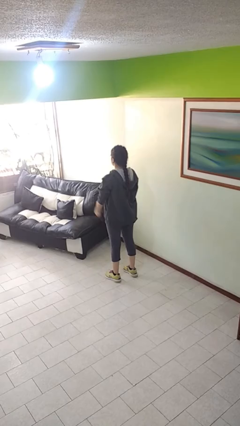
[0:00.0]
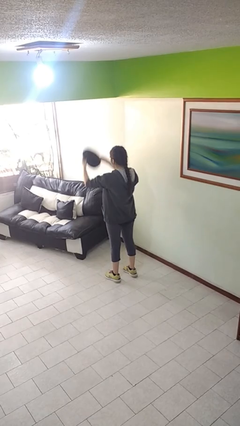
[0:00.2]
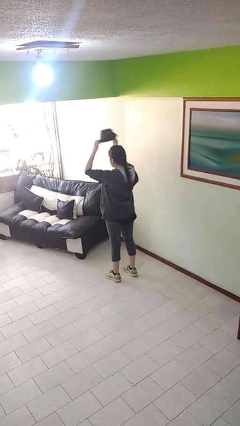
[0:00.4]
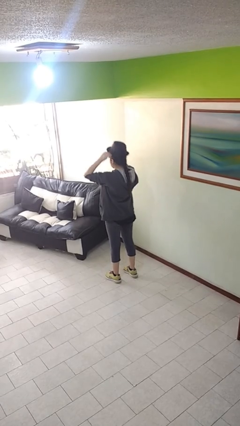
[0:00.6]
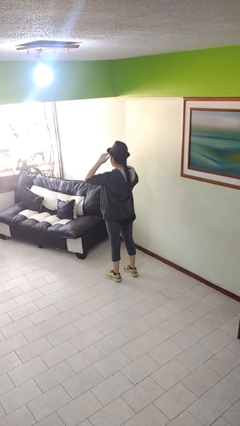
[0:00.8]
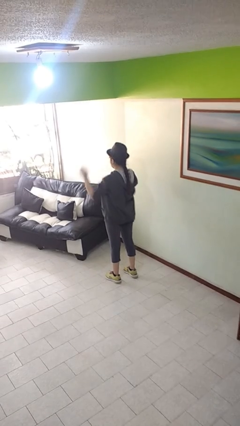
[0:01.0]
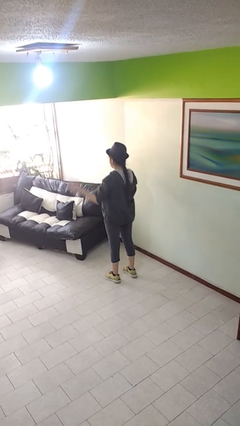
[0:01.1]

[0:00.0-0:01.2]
person puts on hat

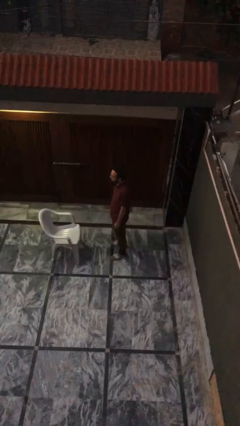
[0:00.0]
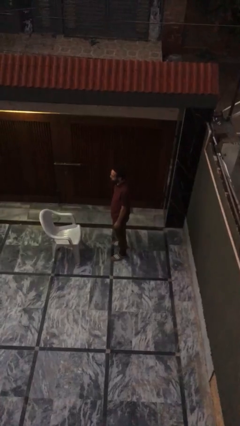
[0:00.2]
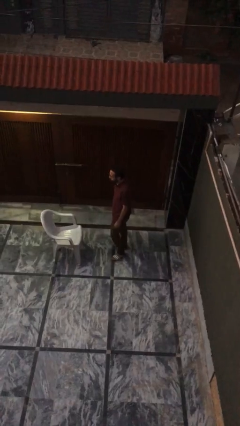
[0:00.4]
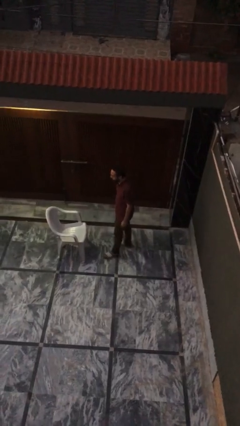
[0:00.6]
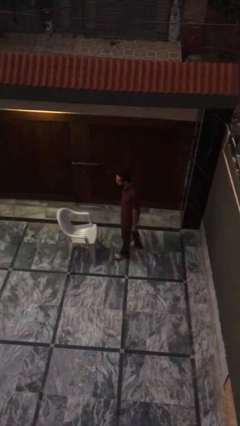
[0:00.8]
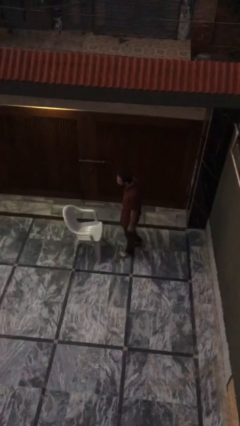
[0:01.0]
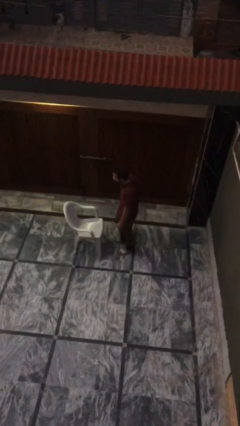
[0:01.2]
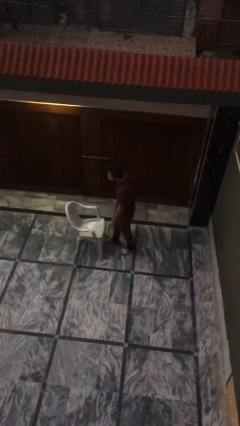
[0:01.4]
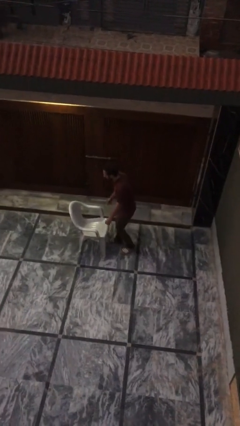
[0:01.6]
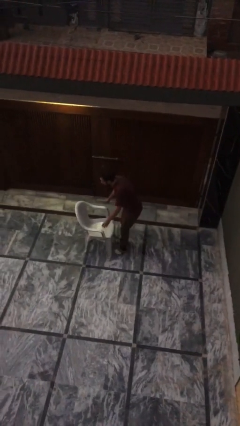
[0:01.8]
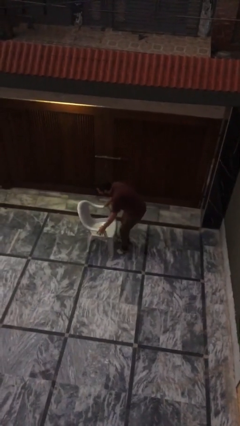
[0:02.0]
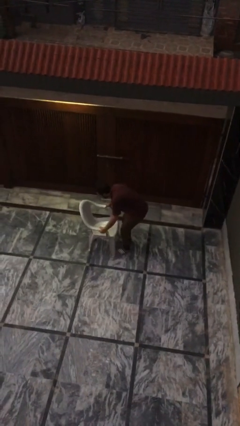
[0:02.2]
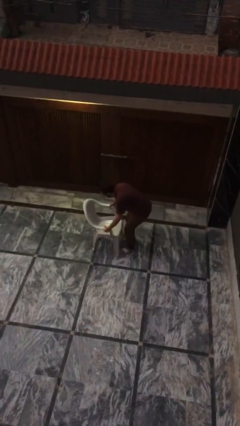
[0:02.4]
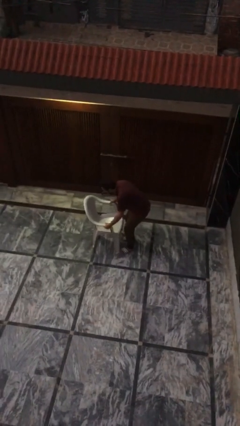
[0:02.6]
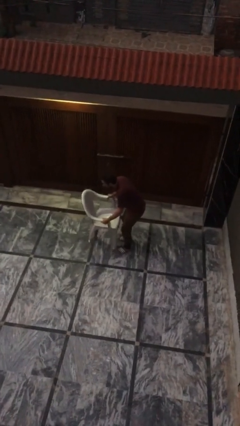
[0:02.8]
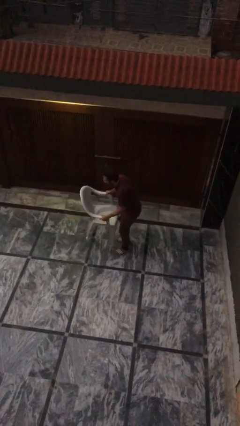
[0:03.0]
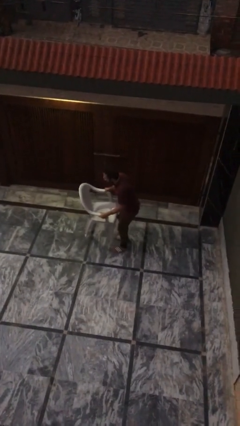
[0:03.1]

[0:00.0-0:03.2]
person picks up object from floor

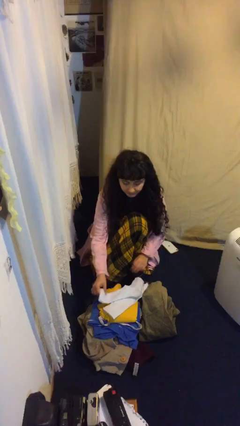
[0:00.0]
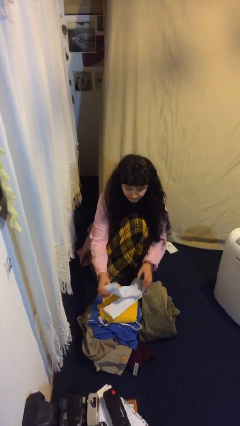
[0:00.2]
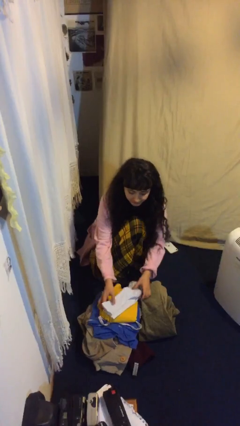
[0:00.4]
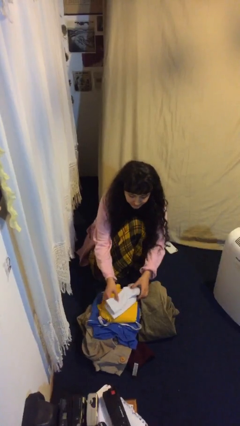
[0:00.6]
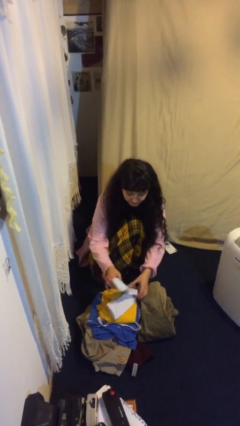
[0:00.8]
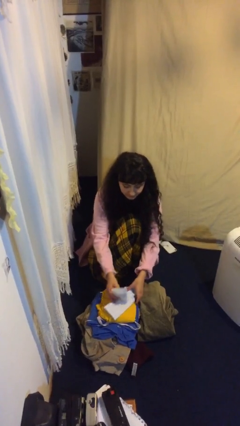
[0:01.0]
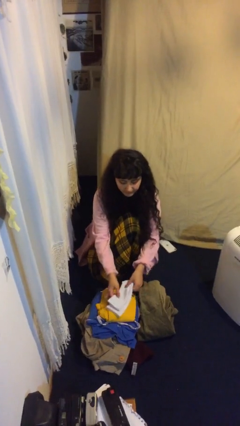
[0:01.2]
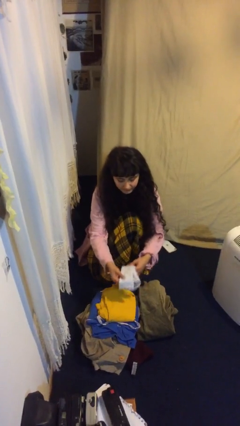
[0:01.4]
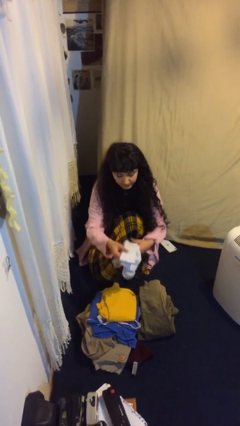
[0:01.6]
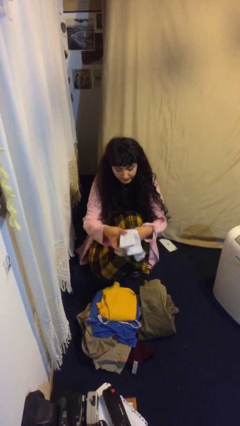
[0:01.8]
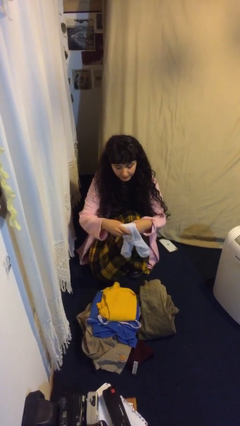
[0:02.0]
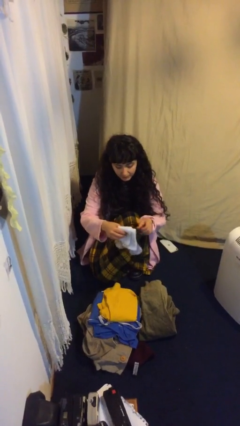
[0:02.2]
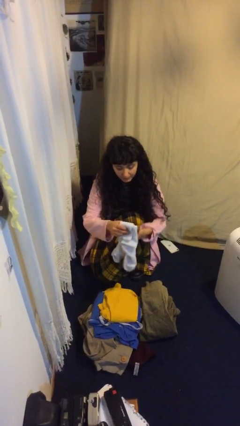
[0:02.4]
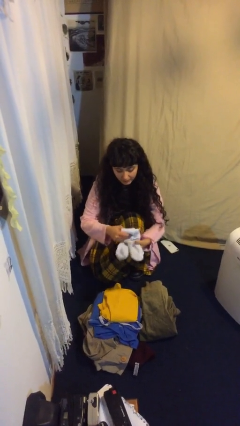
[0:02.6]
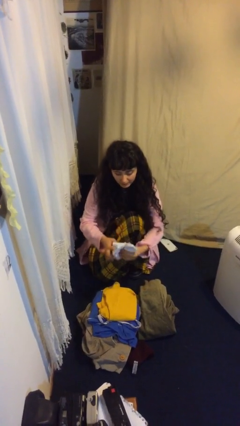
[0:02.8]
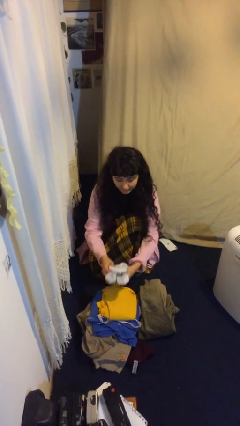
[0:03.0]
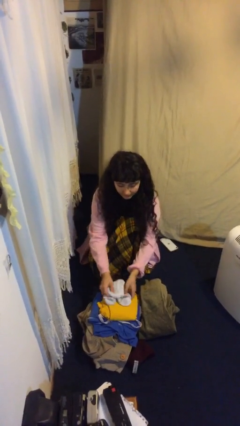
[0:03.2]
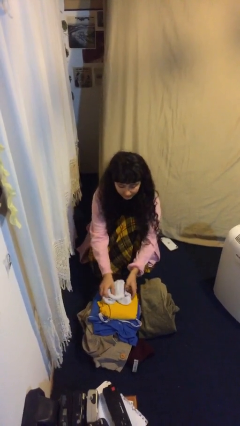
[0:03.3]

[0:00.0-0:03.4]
person folds socks

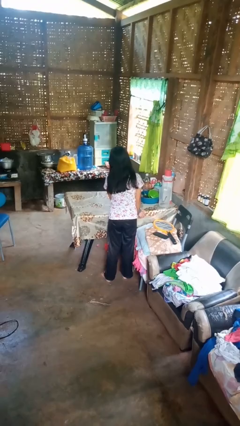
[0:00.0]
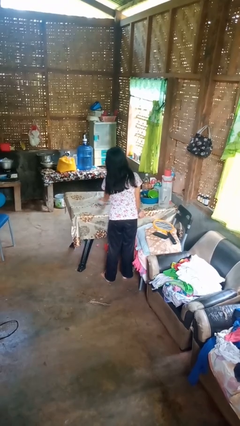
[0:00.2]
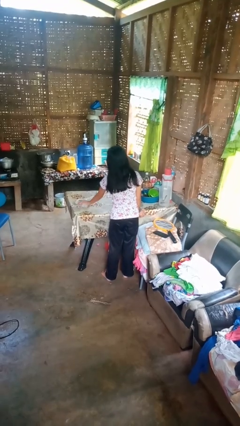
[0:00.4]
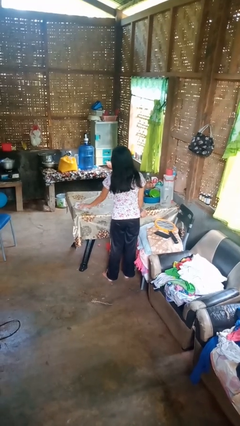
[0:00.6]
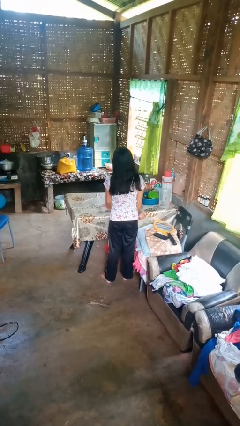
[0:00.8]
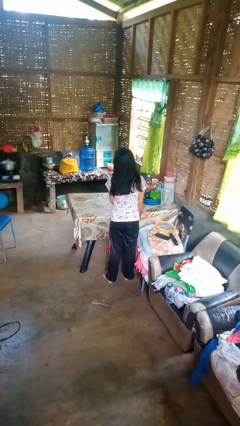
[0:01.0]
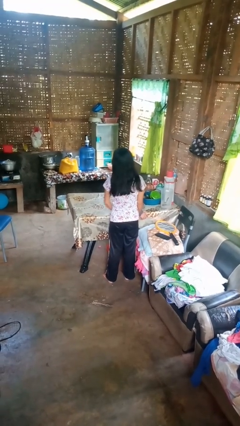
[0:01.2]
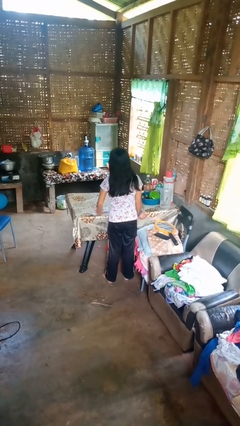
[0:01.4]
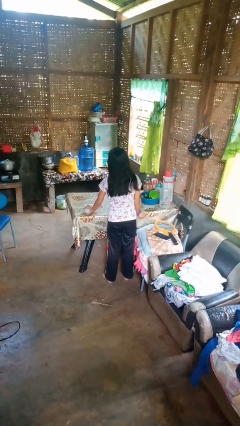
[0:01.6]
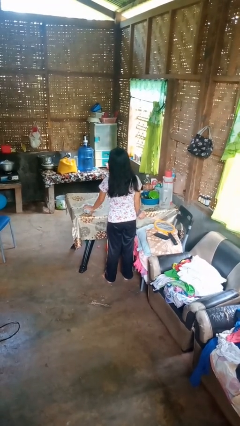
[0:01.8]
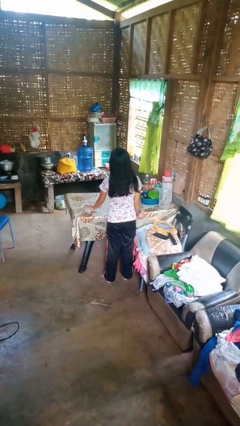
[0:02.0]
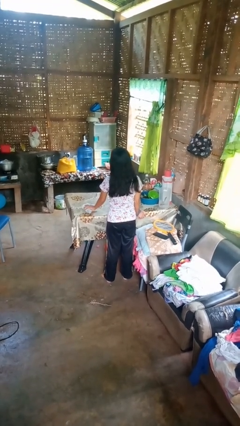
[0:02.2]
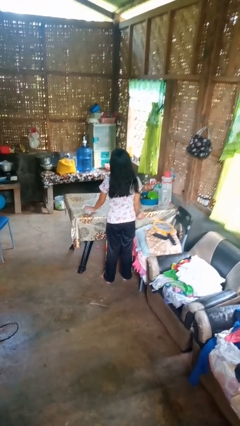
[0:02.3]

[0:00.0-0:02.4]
person cleans table with rag

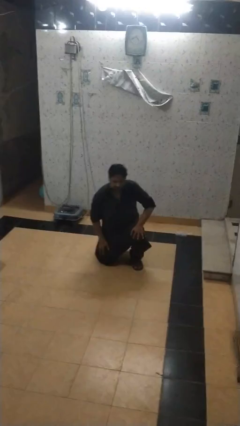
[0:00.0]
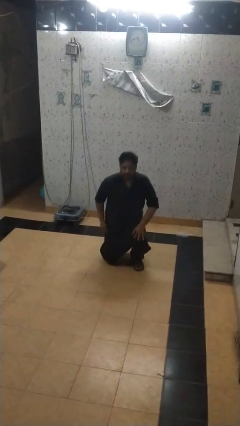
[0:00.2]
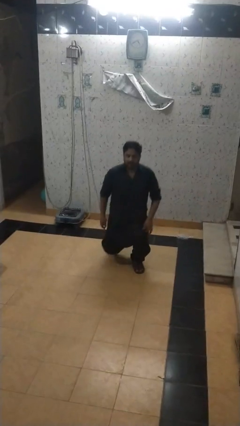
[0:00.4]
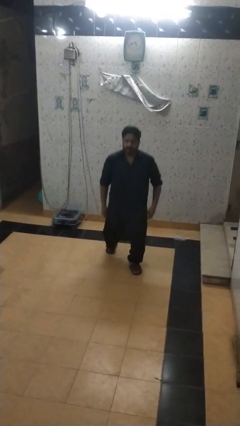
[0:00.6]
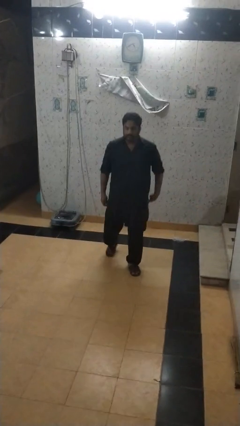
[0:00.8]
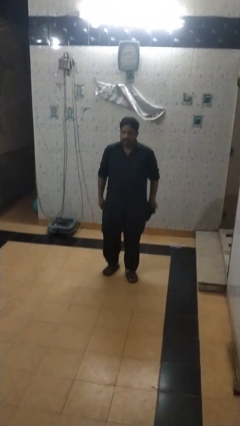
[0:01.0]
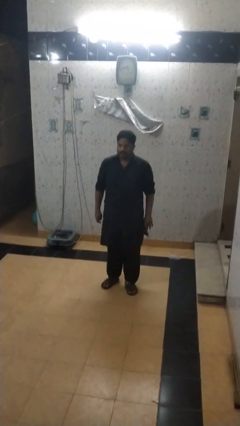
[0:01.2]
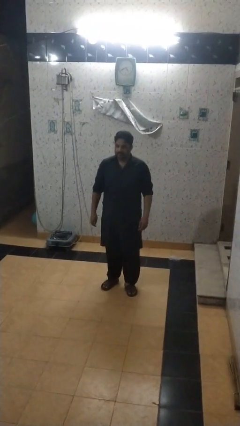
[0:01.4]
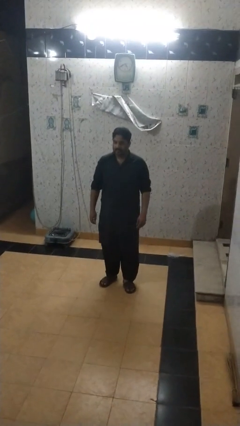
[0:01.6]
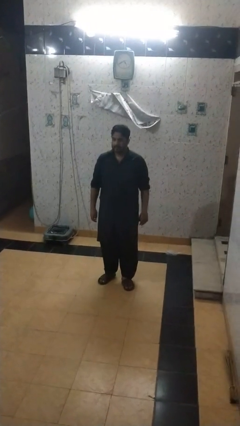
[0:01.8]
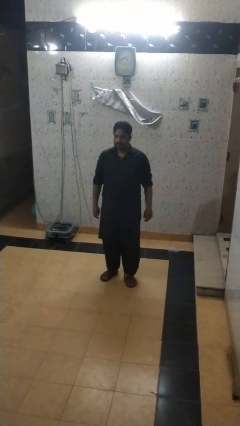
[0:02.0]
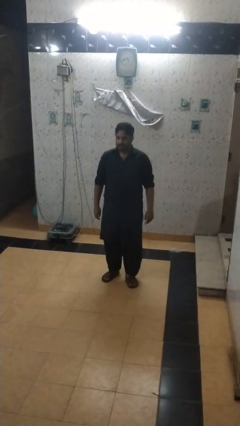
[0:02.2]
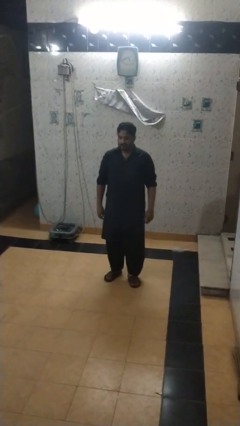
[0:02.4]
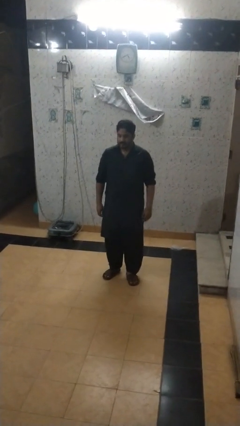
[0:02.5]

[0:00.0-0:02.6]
person stands up from floor

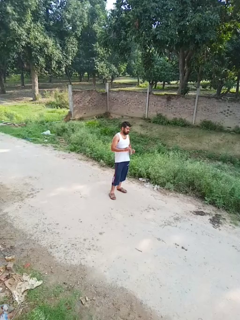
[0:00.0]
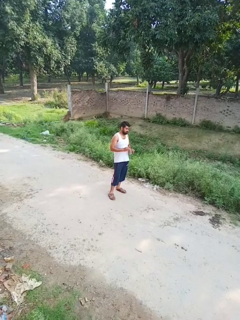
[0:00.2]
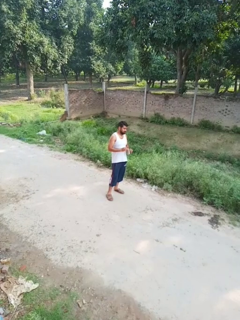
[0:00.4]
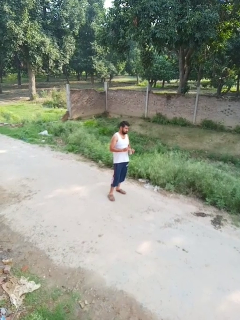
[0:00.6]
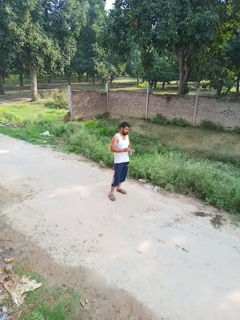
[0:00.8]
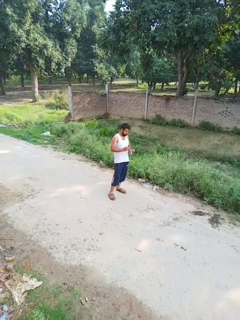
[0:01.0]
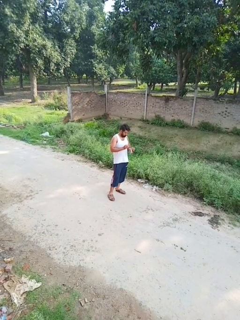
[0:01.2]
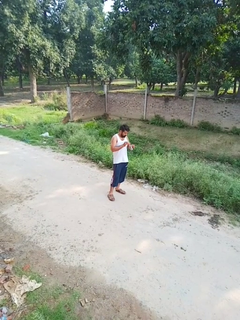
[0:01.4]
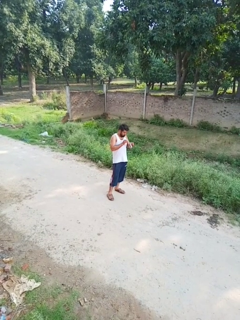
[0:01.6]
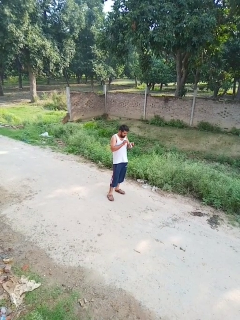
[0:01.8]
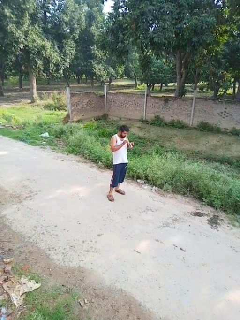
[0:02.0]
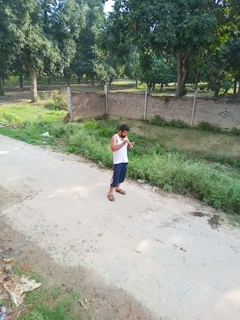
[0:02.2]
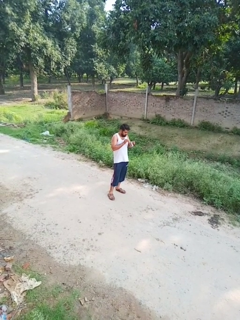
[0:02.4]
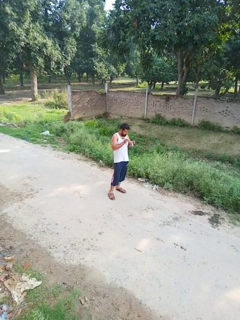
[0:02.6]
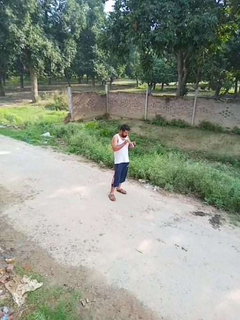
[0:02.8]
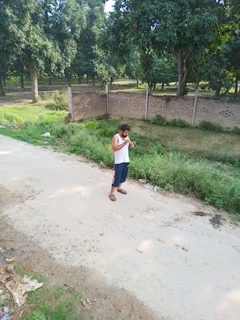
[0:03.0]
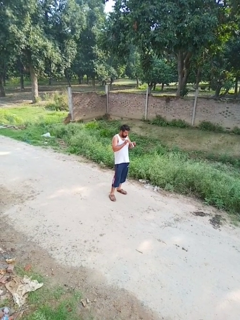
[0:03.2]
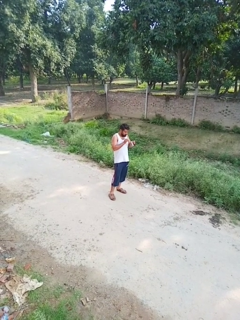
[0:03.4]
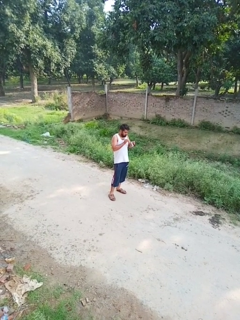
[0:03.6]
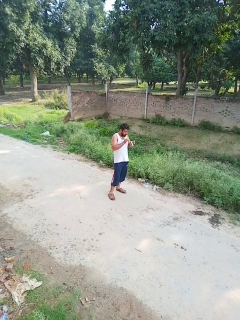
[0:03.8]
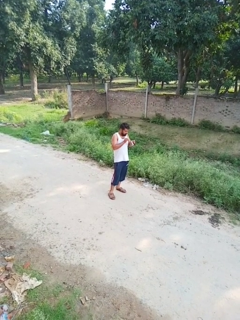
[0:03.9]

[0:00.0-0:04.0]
person drinks from straw

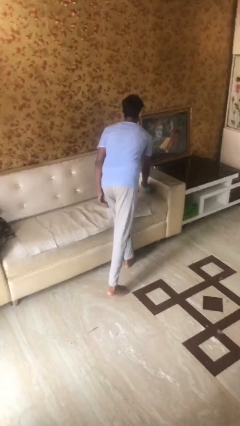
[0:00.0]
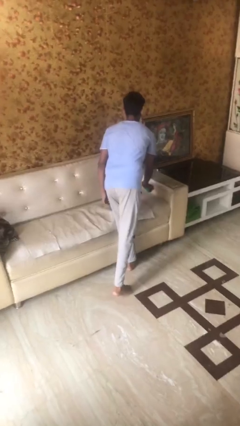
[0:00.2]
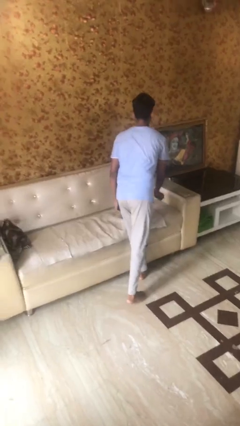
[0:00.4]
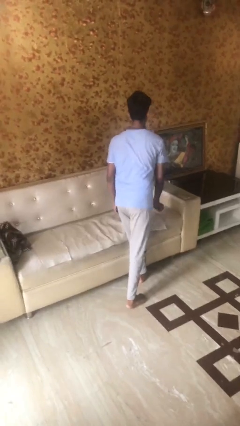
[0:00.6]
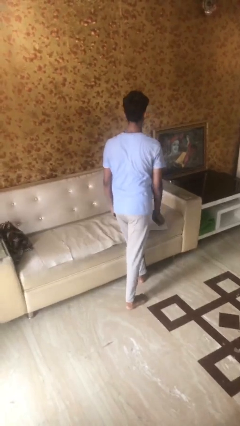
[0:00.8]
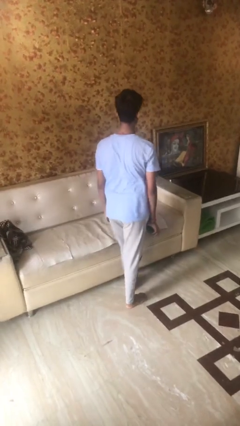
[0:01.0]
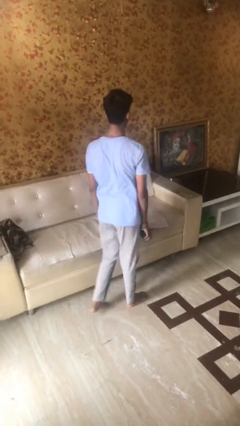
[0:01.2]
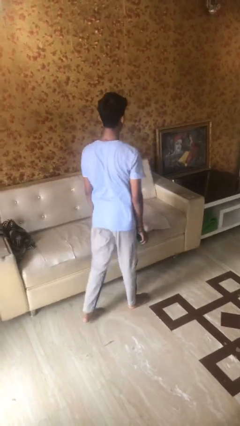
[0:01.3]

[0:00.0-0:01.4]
person picks up object from bed
